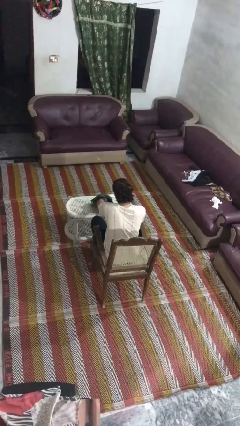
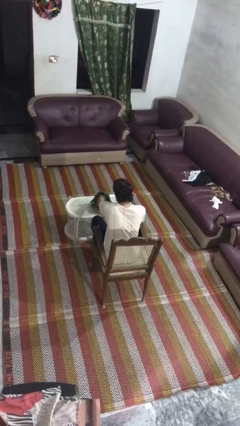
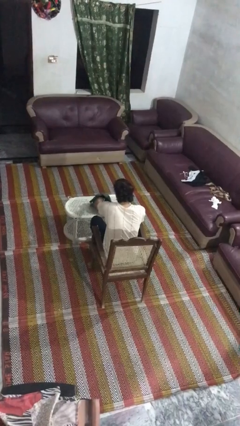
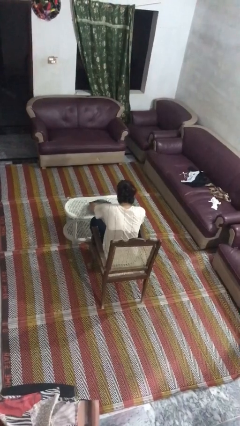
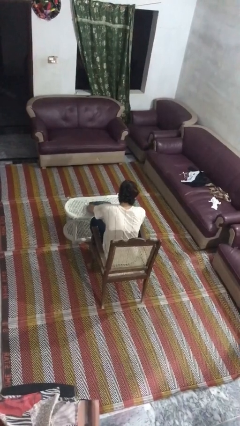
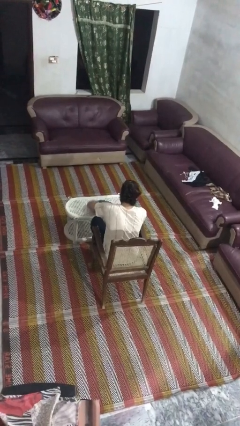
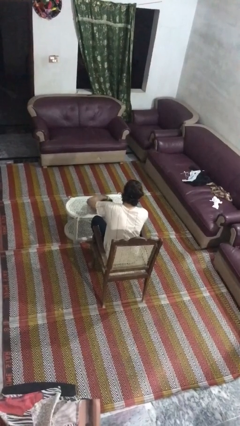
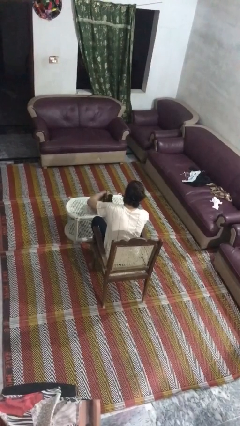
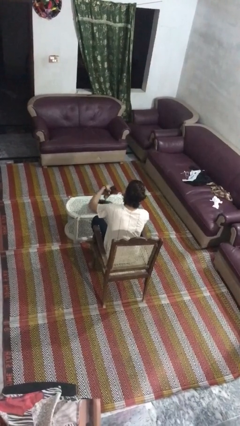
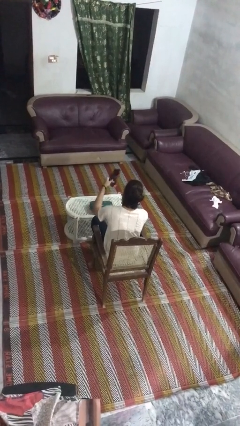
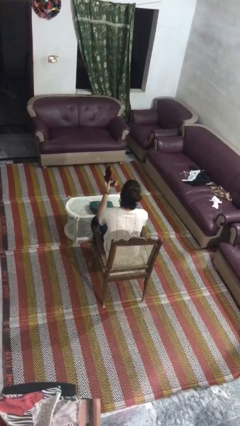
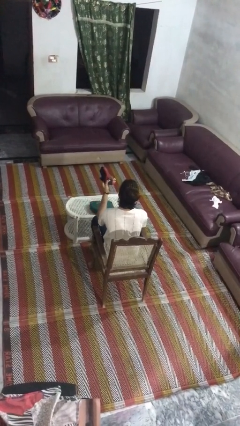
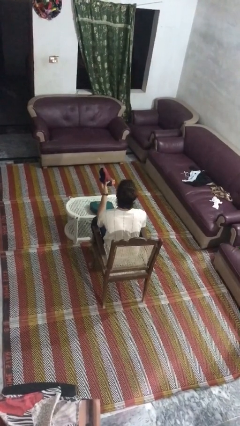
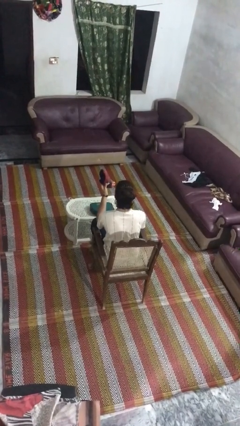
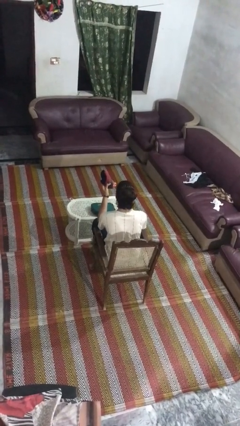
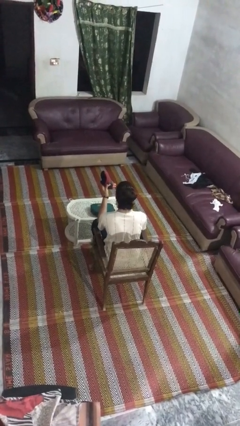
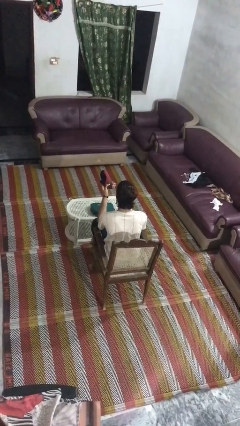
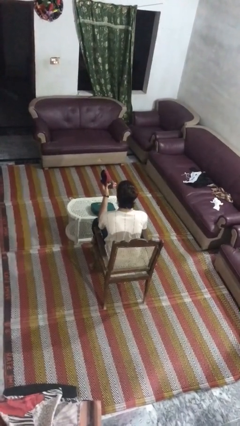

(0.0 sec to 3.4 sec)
person takes object from purse

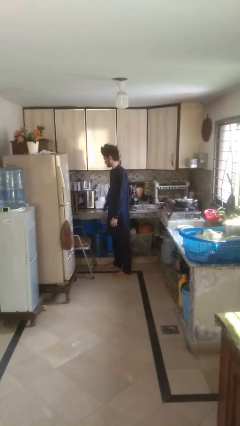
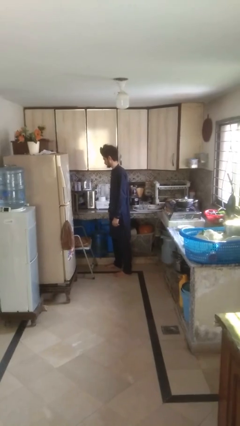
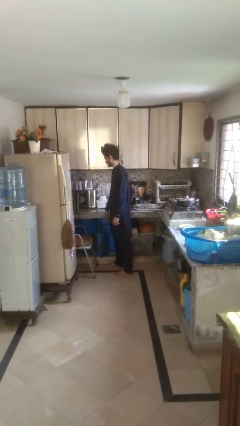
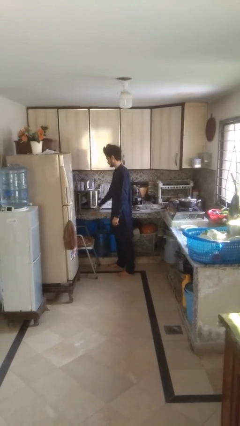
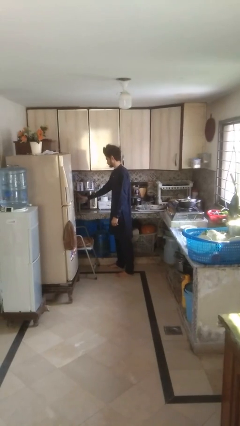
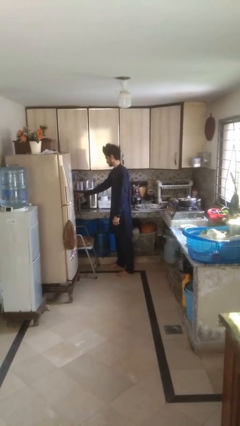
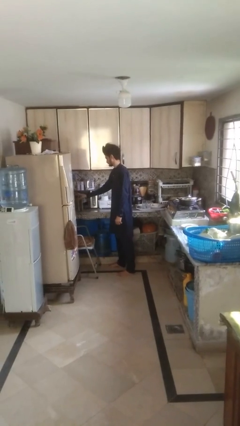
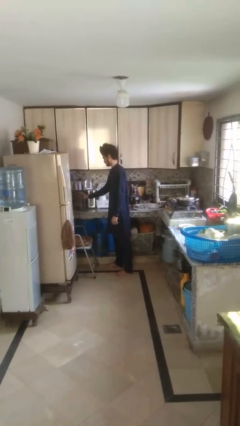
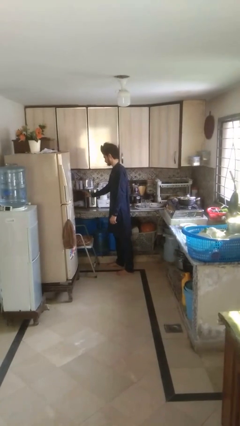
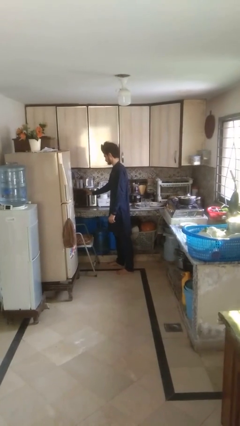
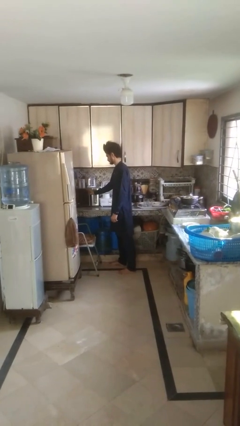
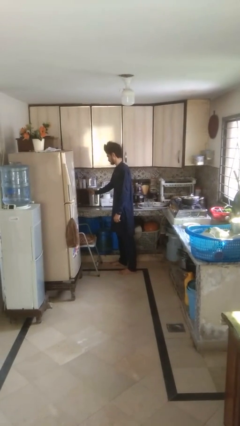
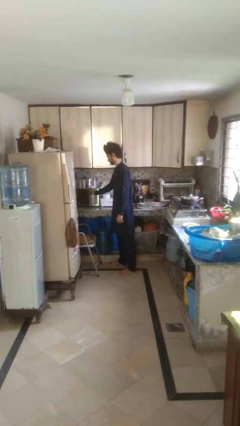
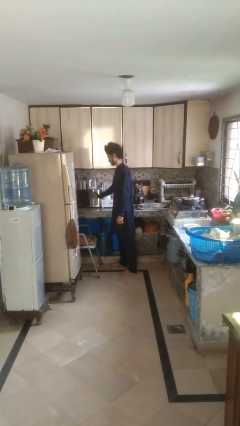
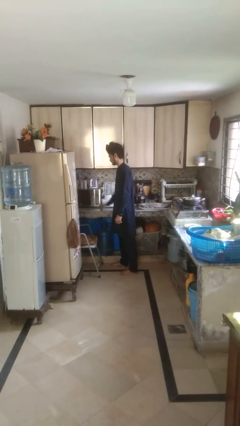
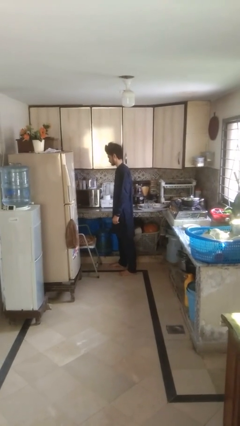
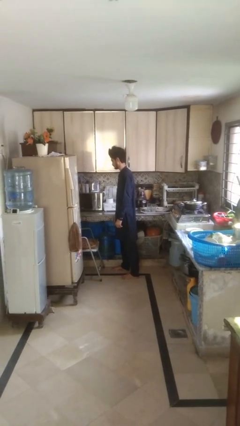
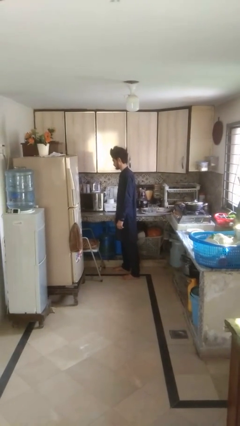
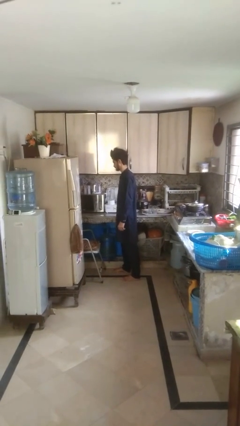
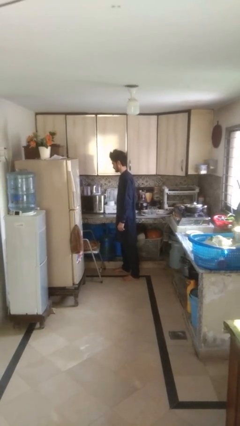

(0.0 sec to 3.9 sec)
person closes oven door

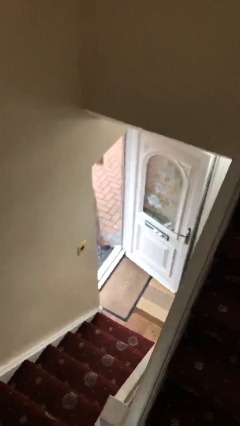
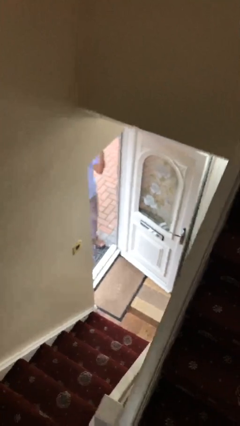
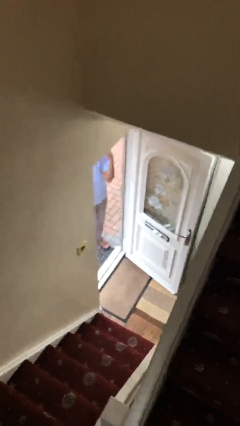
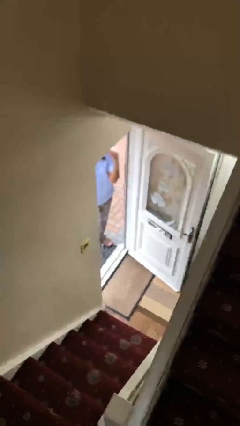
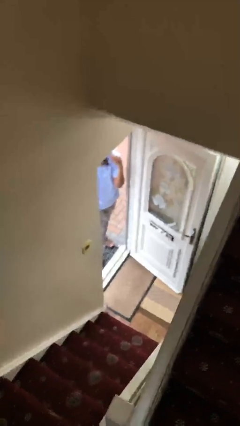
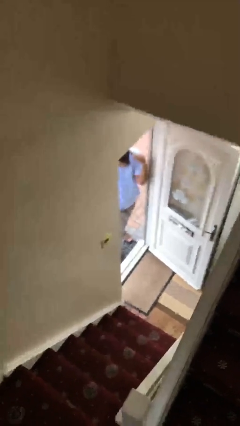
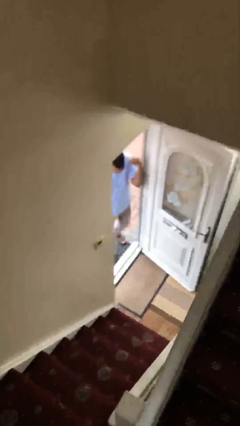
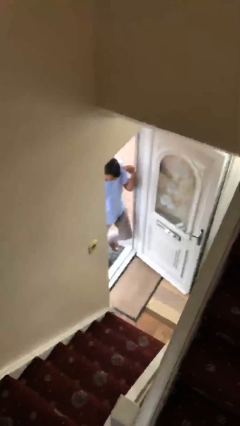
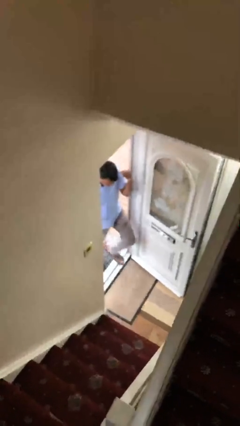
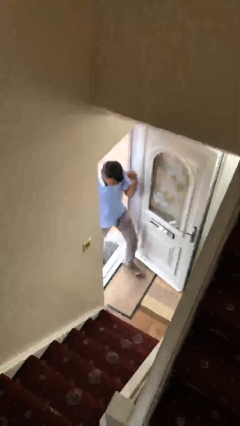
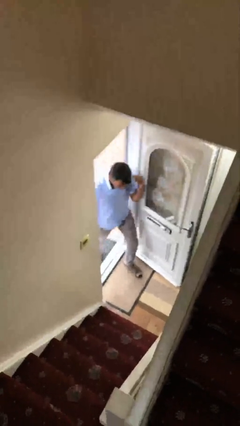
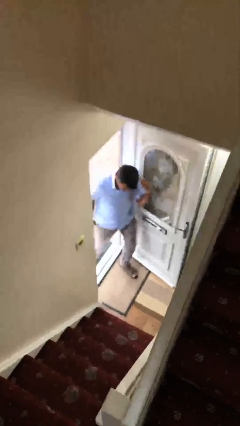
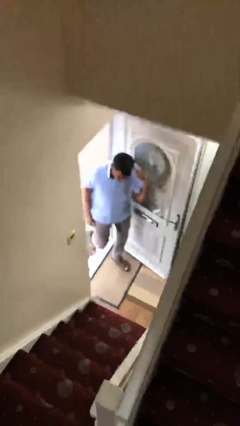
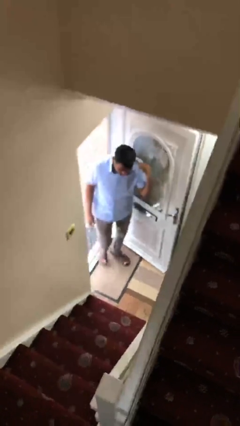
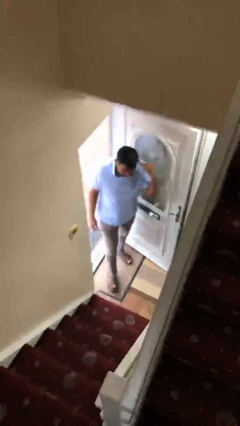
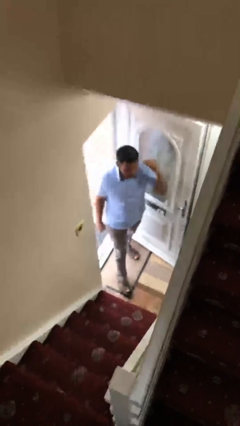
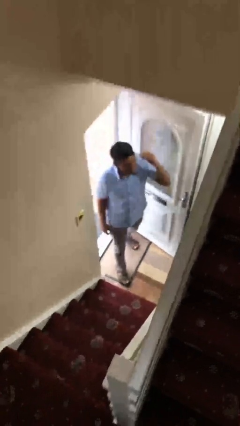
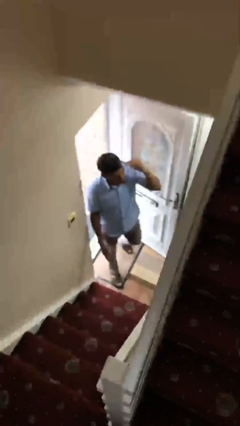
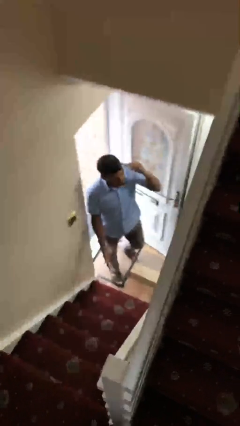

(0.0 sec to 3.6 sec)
person enters scene through structure

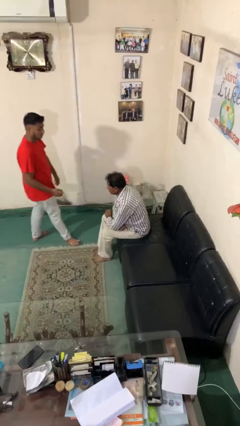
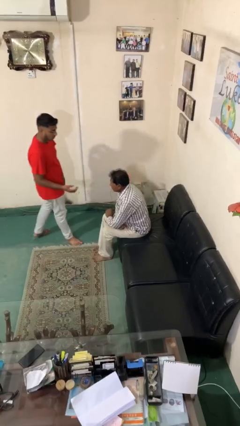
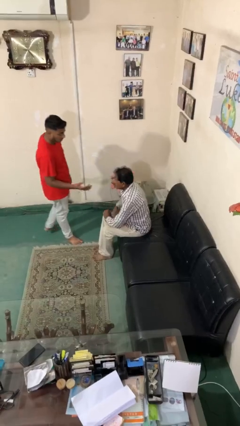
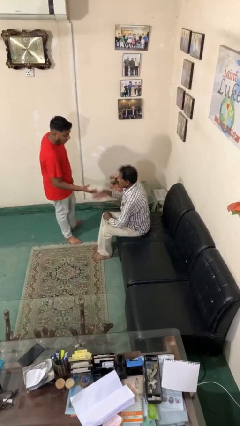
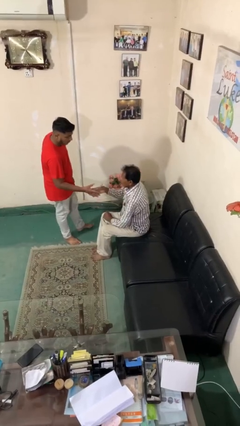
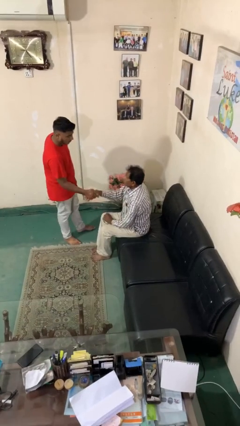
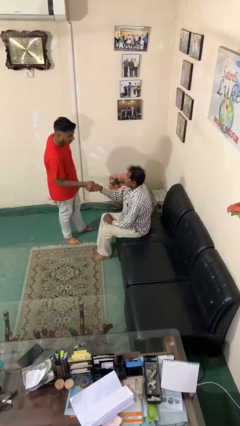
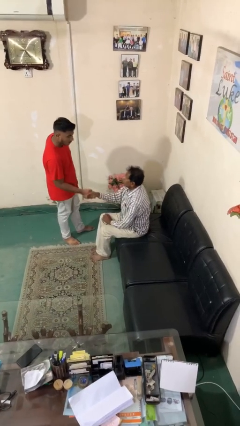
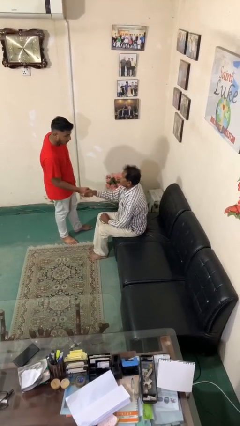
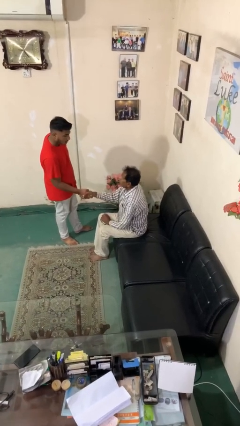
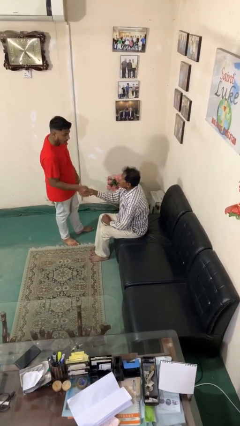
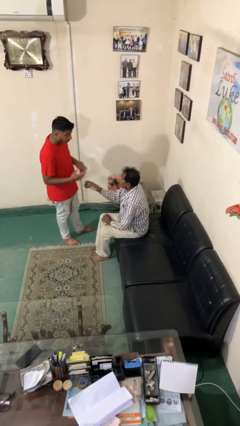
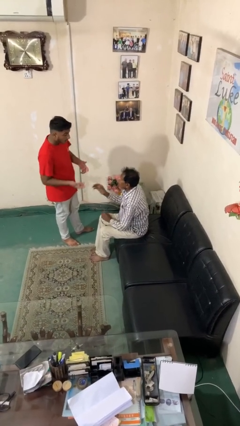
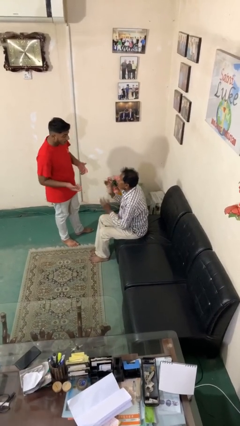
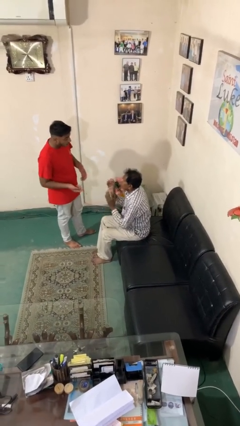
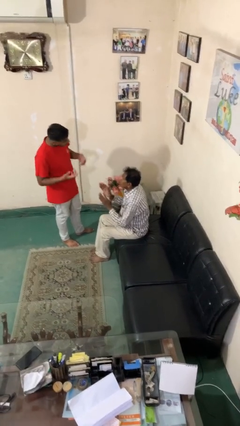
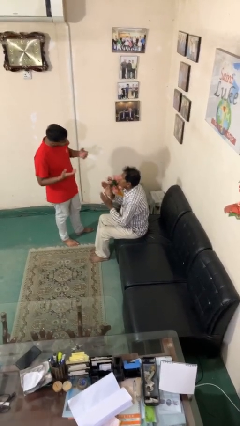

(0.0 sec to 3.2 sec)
person shakes hand

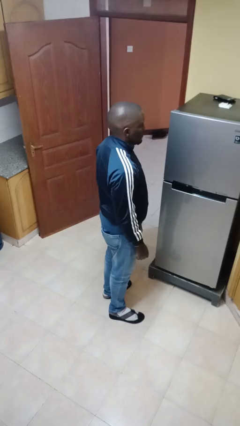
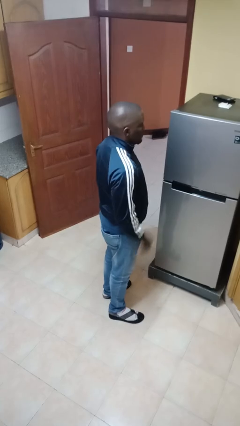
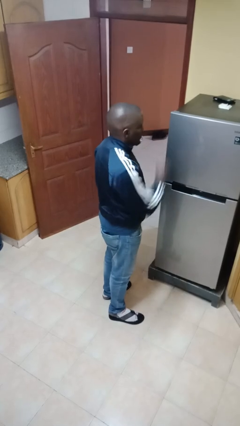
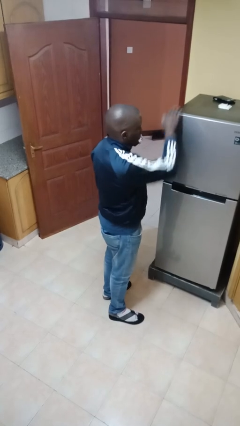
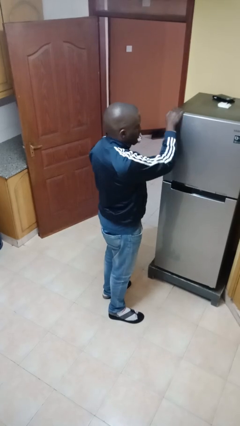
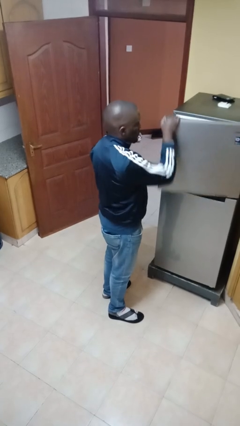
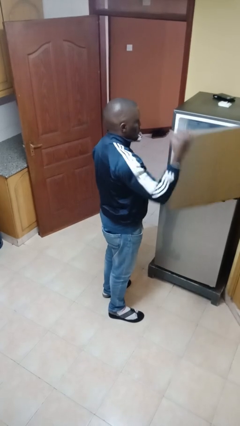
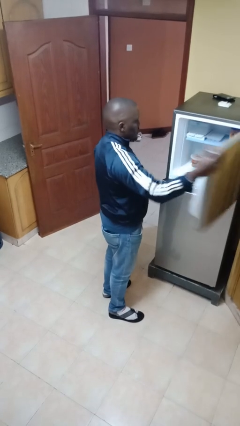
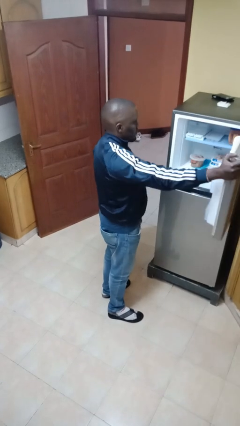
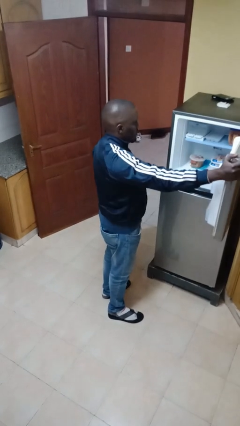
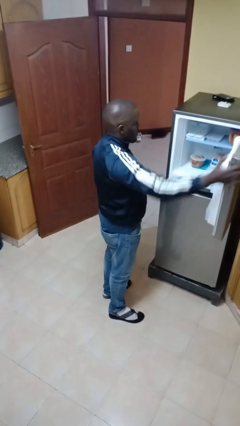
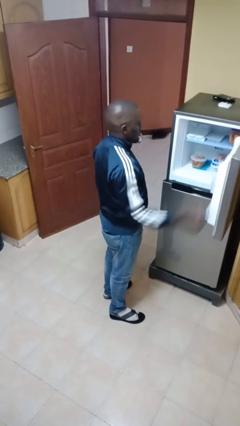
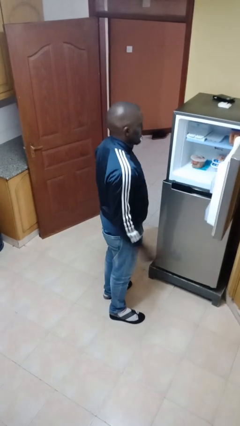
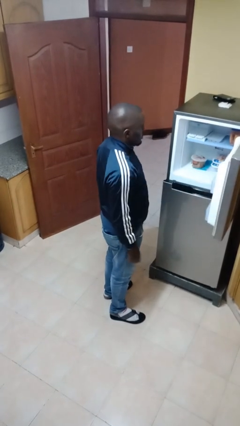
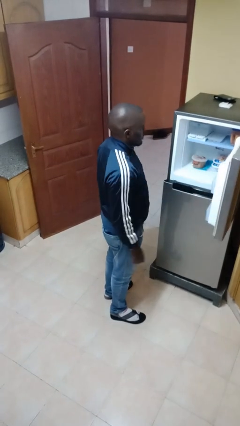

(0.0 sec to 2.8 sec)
person opens refrigerator

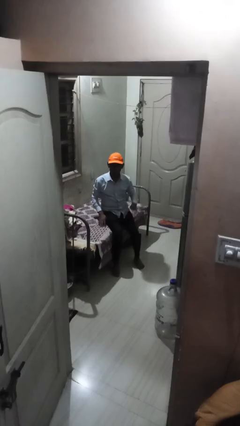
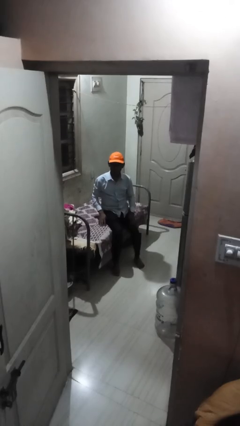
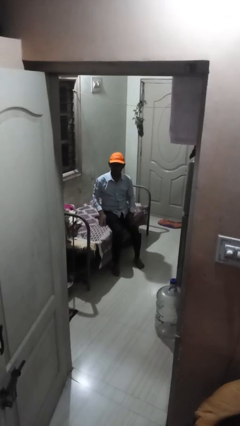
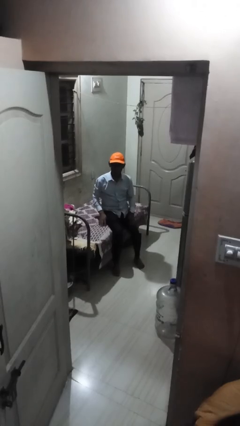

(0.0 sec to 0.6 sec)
person gestures number four

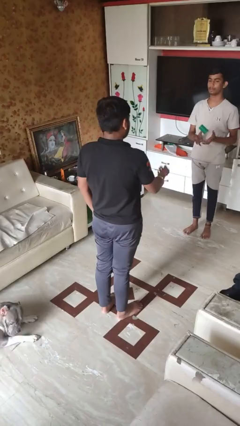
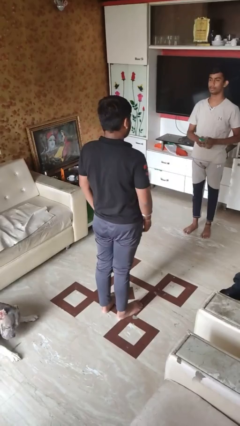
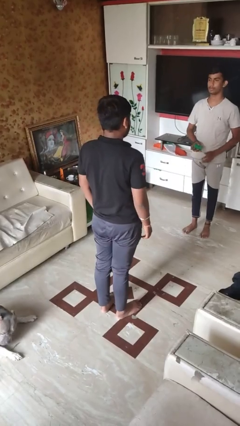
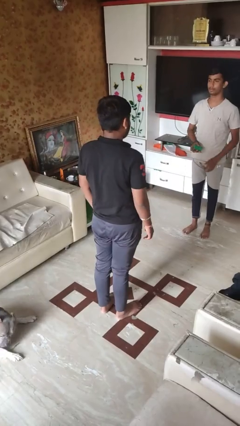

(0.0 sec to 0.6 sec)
person throws object to person
